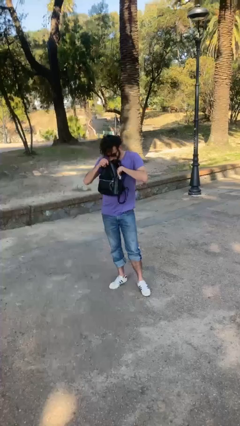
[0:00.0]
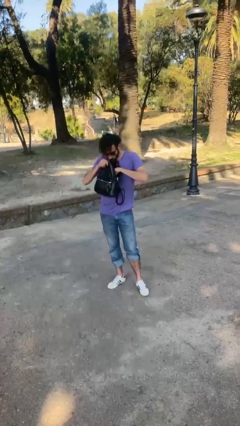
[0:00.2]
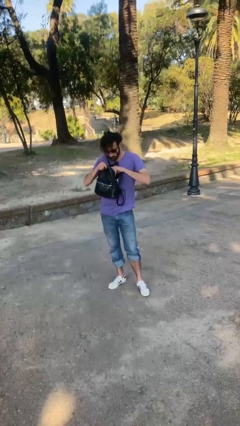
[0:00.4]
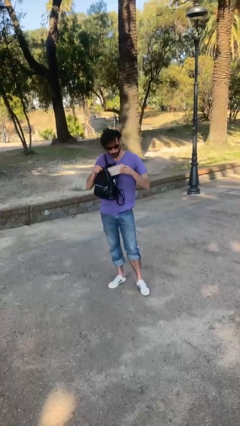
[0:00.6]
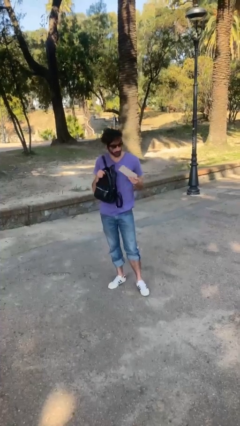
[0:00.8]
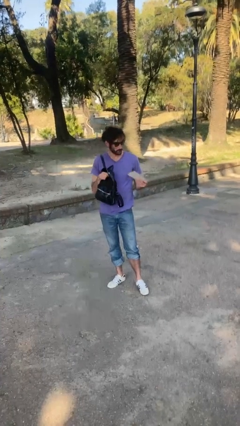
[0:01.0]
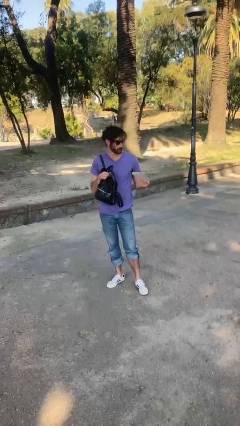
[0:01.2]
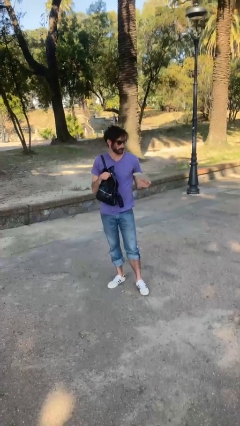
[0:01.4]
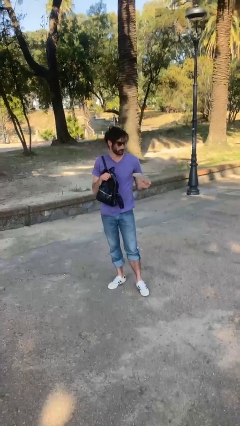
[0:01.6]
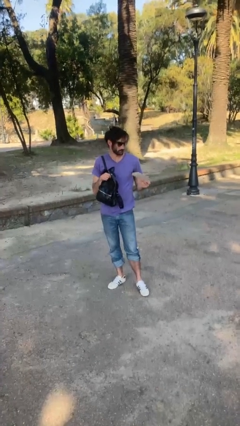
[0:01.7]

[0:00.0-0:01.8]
person takes object from purse

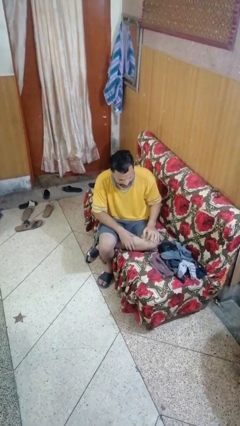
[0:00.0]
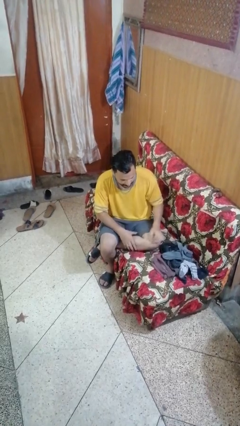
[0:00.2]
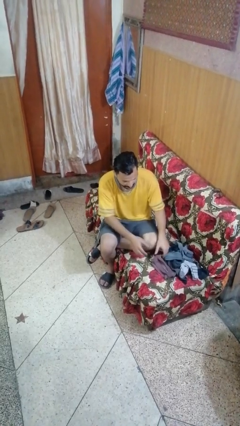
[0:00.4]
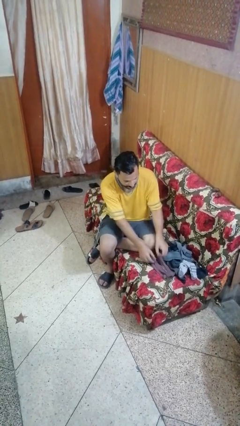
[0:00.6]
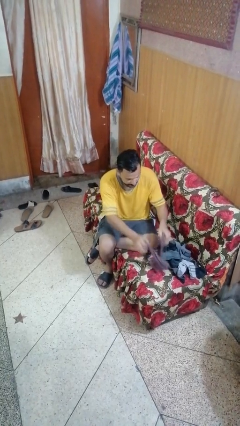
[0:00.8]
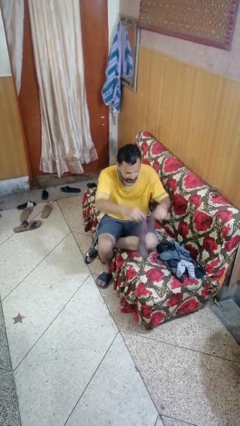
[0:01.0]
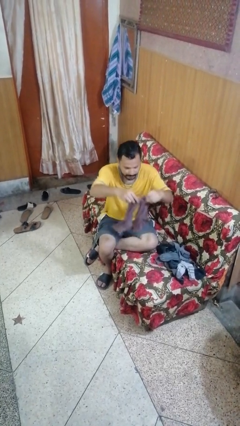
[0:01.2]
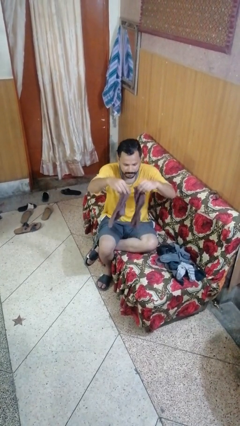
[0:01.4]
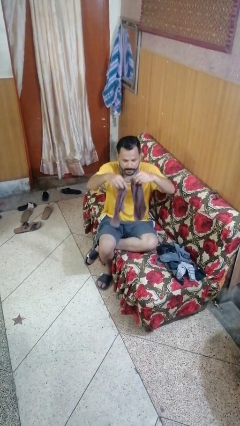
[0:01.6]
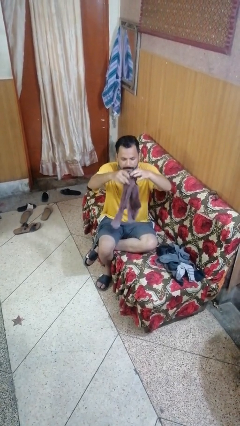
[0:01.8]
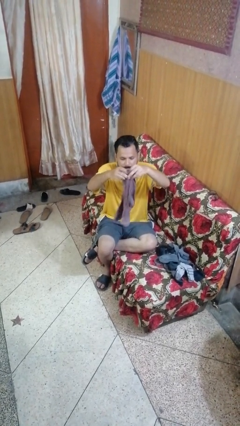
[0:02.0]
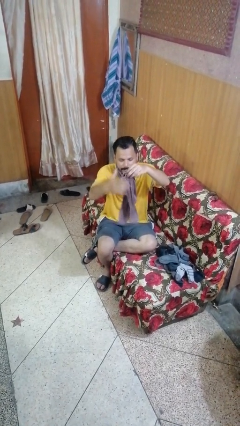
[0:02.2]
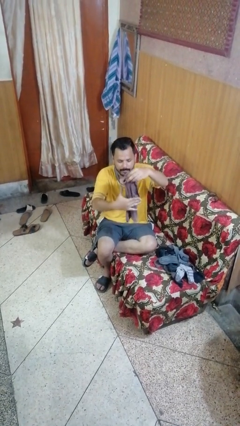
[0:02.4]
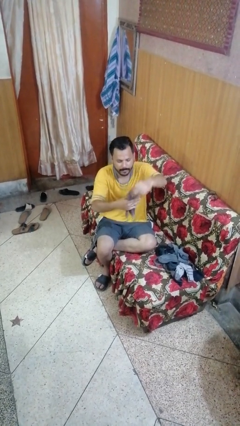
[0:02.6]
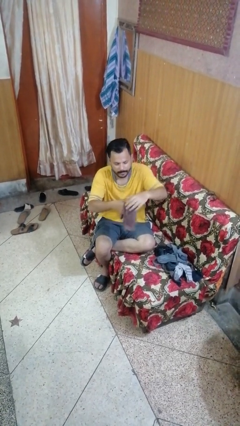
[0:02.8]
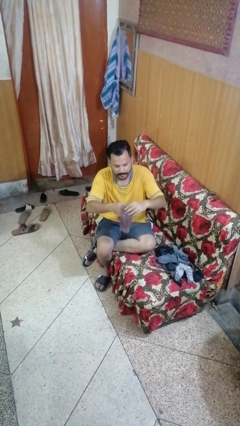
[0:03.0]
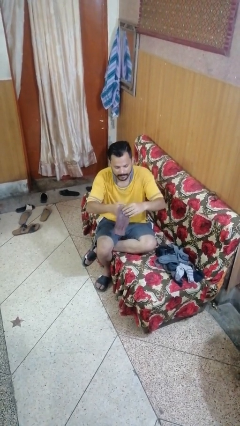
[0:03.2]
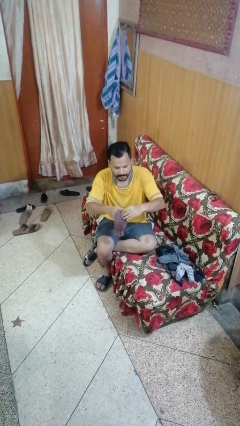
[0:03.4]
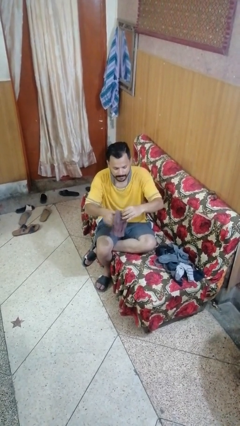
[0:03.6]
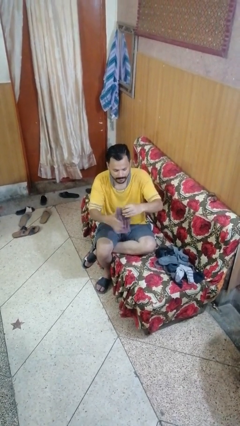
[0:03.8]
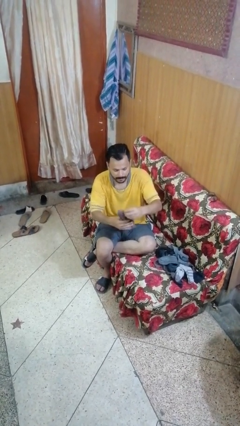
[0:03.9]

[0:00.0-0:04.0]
person folds socks

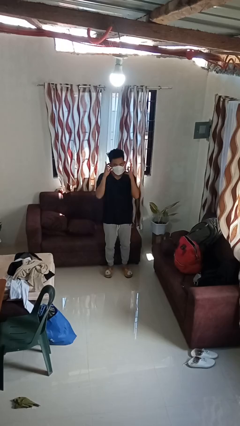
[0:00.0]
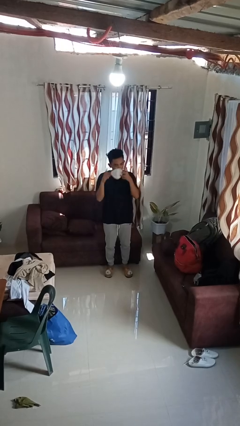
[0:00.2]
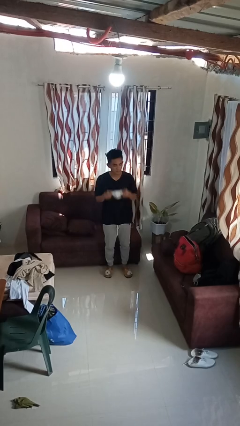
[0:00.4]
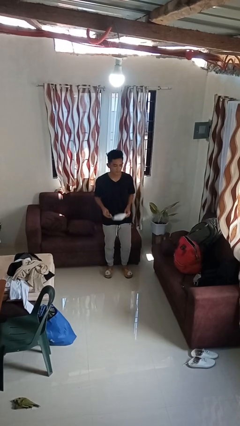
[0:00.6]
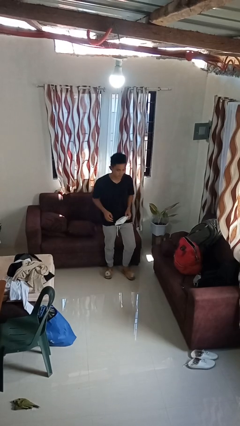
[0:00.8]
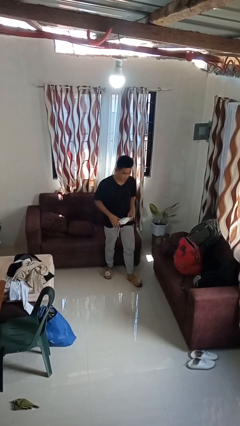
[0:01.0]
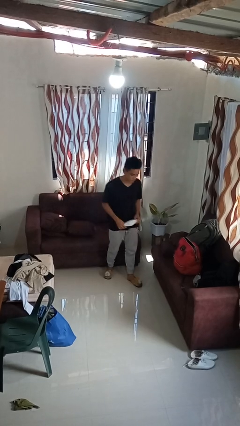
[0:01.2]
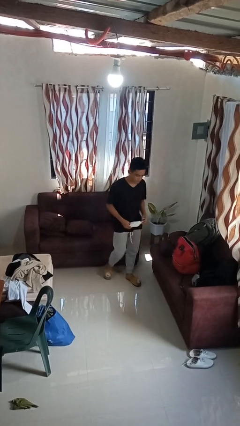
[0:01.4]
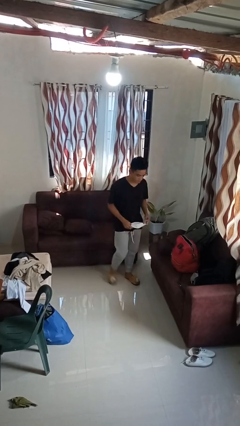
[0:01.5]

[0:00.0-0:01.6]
person takes off facemask

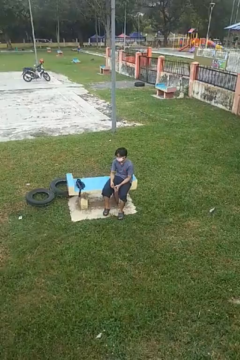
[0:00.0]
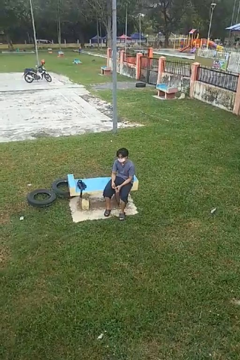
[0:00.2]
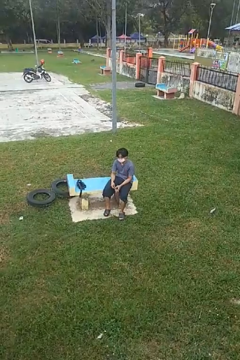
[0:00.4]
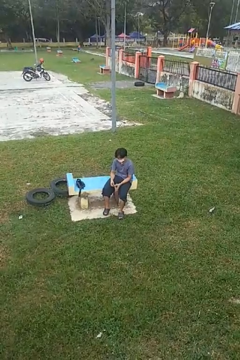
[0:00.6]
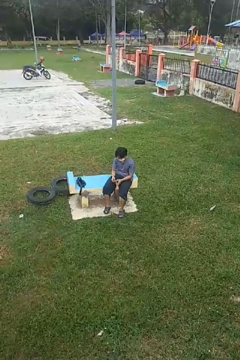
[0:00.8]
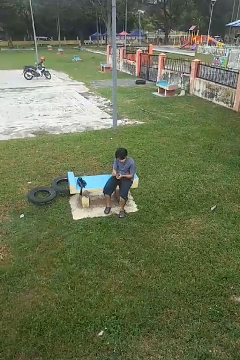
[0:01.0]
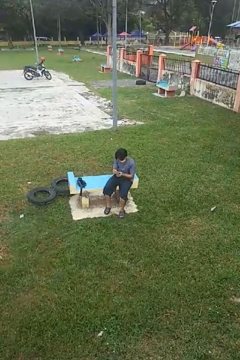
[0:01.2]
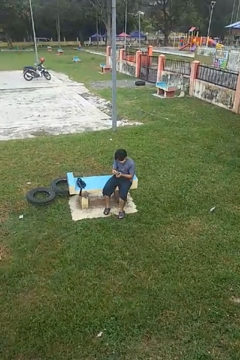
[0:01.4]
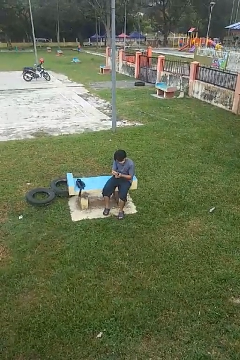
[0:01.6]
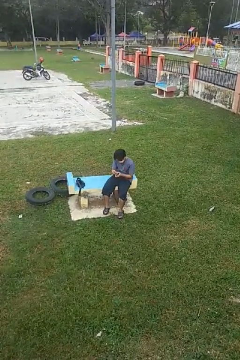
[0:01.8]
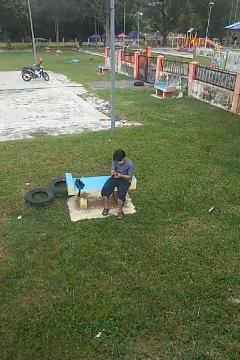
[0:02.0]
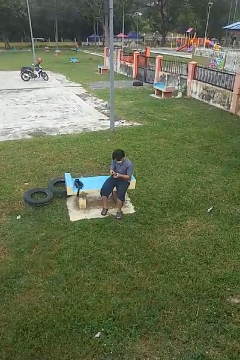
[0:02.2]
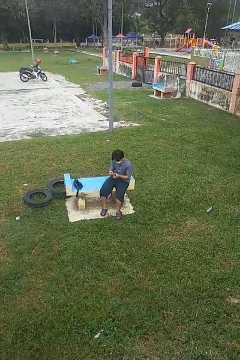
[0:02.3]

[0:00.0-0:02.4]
person searches in purse

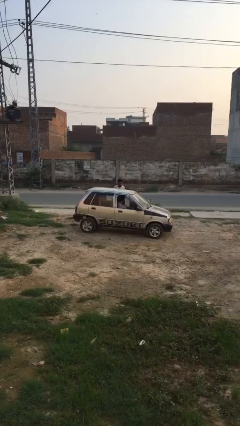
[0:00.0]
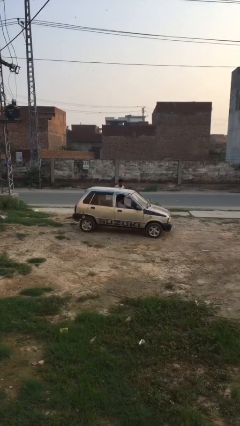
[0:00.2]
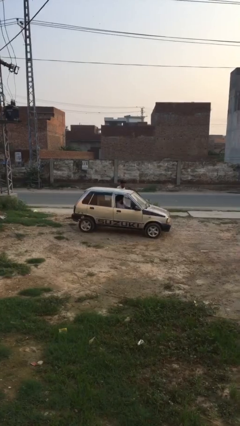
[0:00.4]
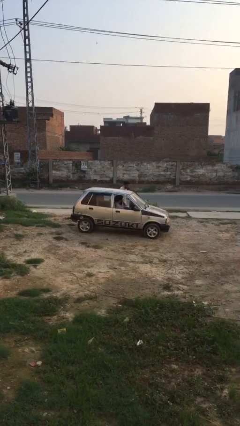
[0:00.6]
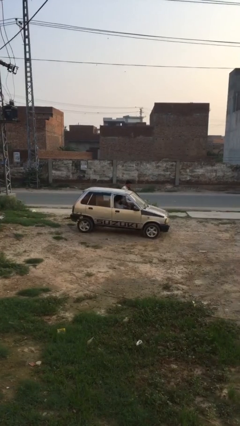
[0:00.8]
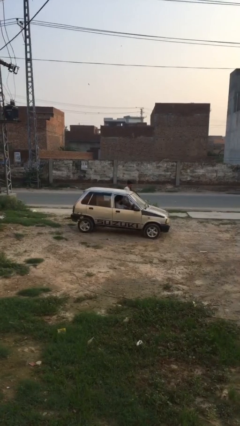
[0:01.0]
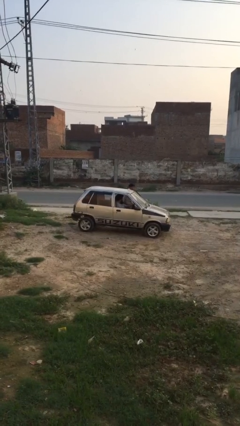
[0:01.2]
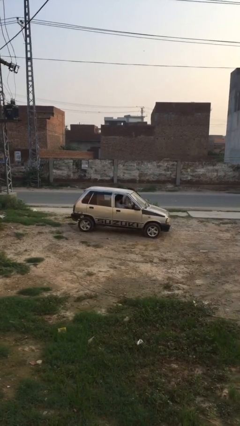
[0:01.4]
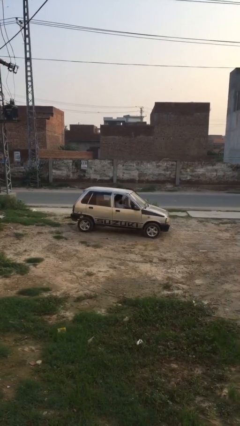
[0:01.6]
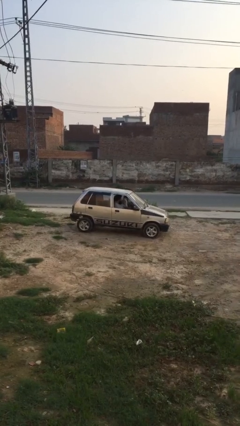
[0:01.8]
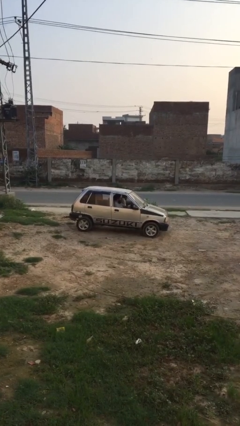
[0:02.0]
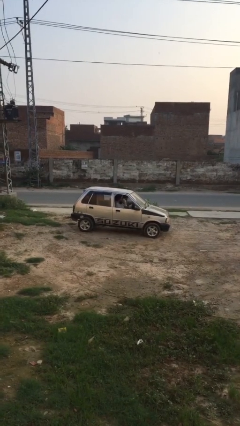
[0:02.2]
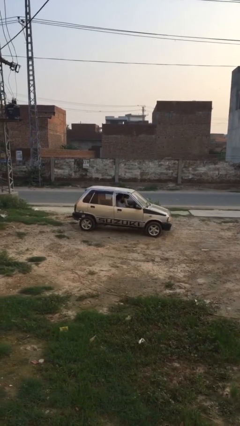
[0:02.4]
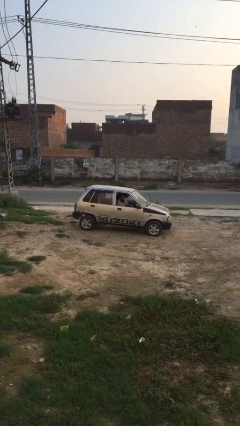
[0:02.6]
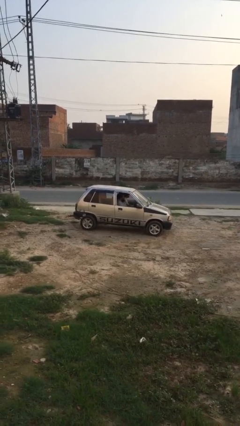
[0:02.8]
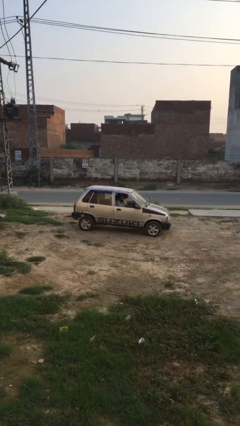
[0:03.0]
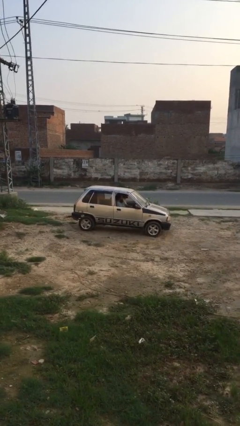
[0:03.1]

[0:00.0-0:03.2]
car picks up person

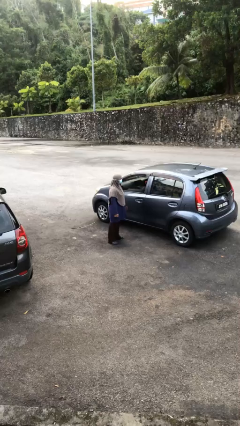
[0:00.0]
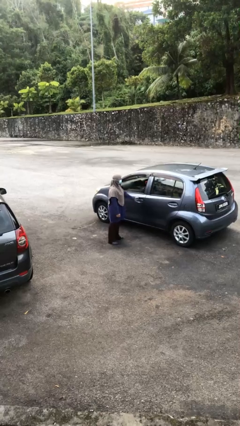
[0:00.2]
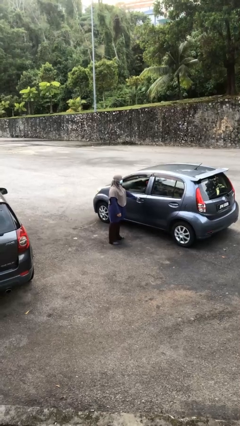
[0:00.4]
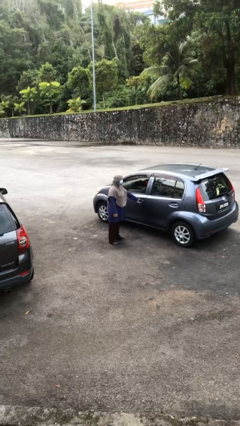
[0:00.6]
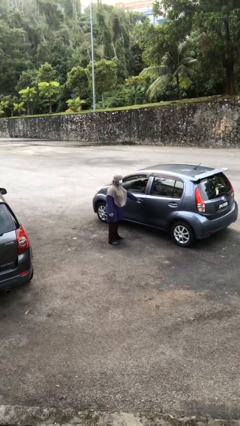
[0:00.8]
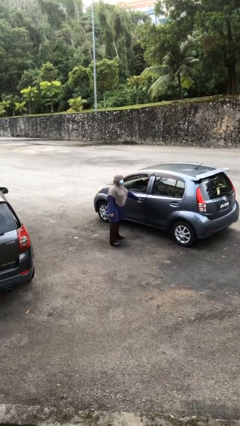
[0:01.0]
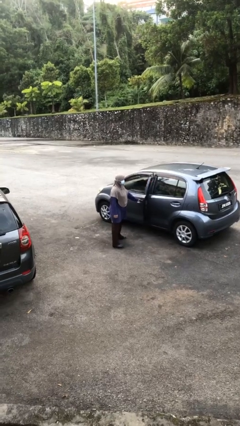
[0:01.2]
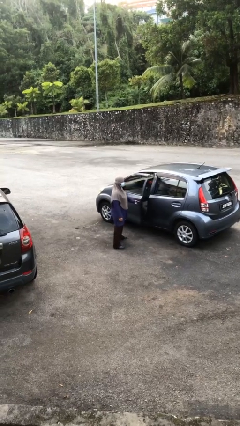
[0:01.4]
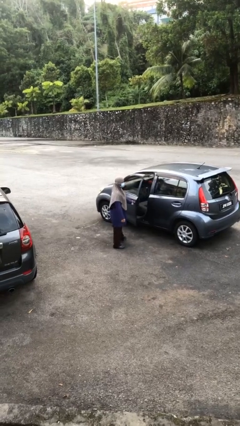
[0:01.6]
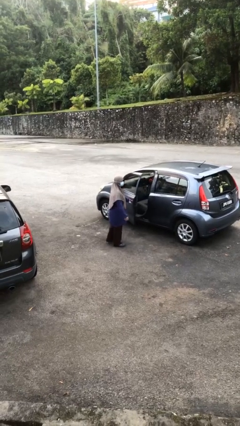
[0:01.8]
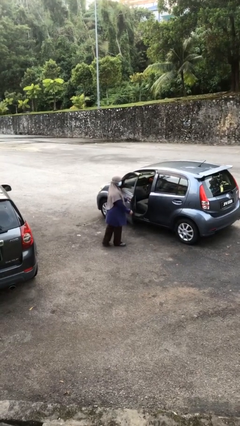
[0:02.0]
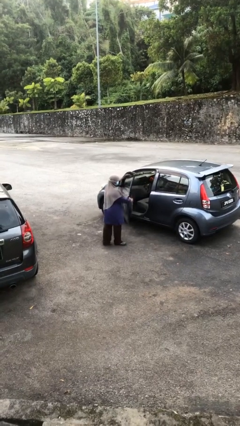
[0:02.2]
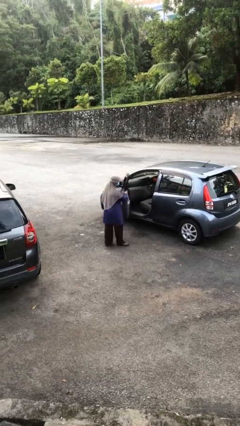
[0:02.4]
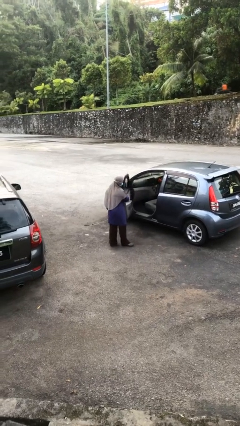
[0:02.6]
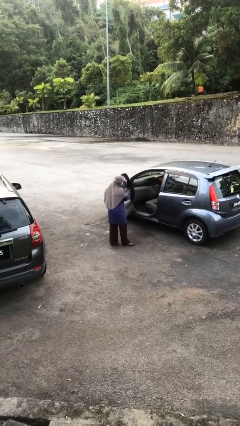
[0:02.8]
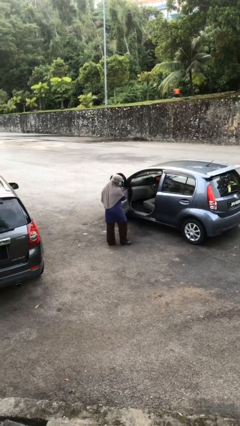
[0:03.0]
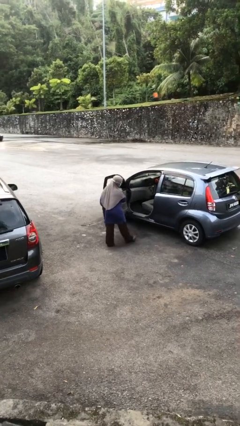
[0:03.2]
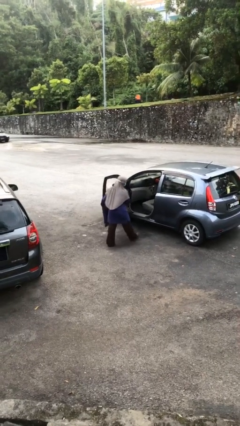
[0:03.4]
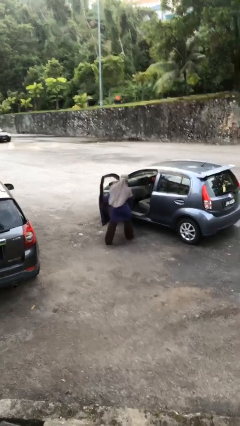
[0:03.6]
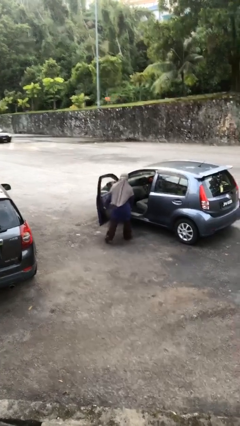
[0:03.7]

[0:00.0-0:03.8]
person opens car door

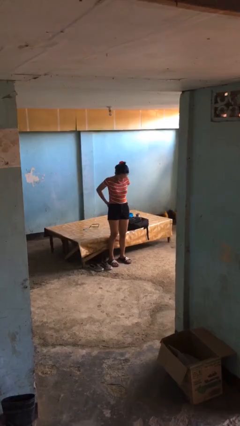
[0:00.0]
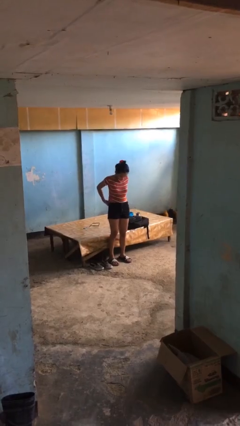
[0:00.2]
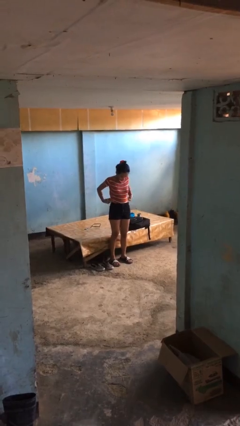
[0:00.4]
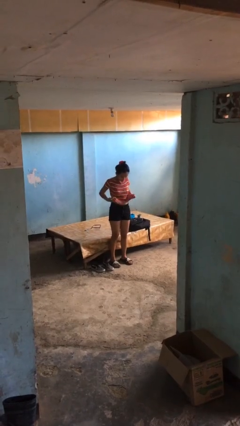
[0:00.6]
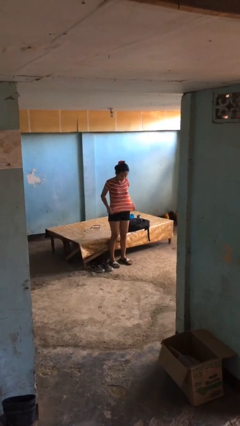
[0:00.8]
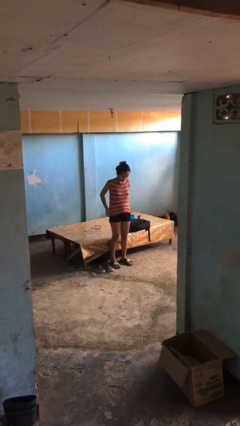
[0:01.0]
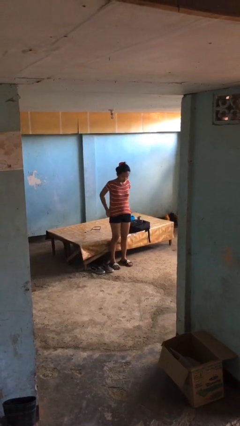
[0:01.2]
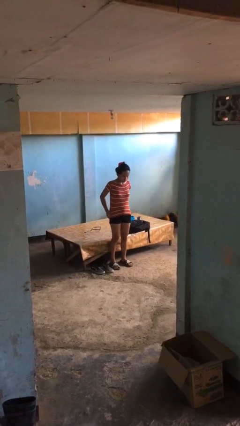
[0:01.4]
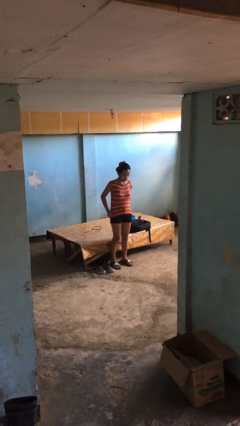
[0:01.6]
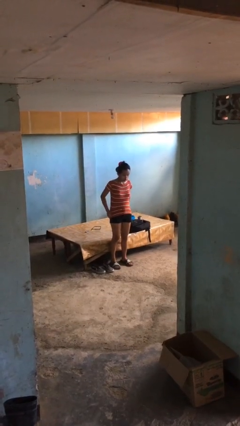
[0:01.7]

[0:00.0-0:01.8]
person untucks shirt
